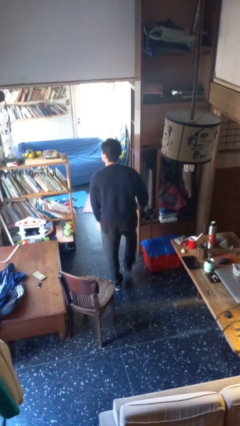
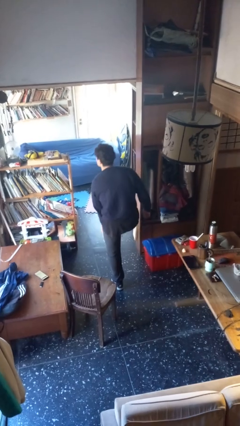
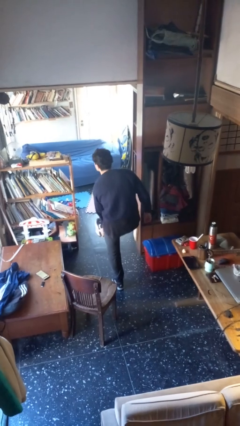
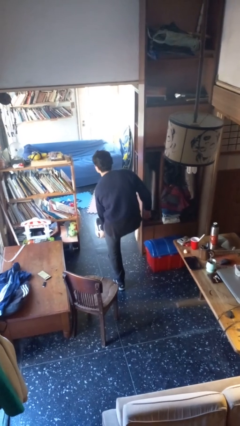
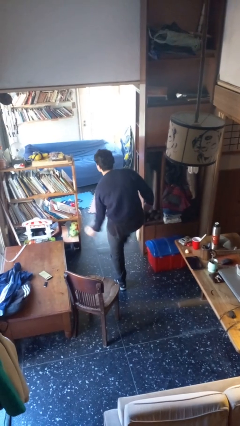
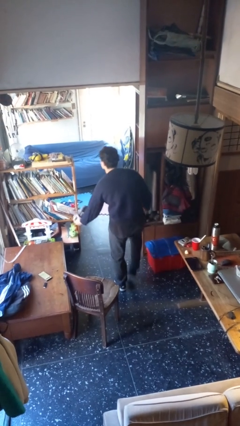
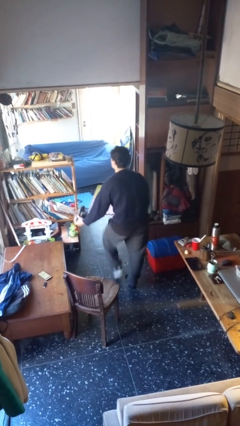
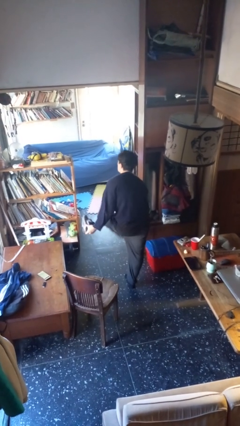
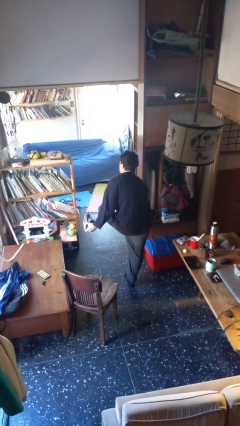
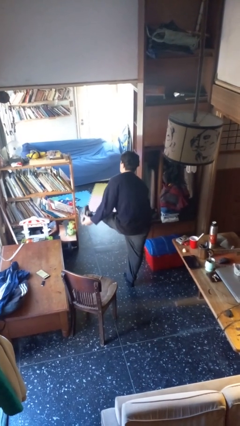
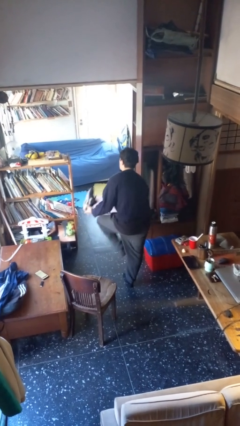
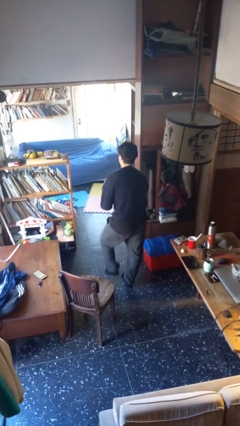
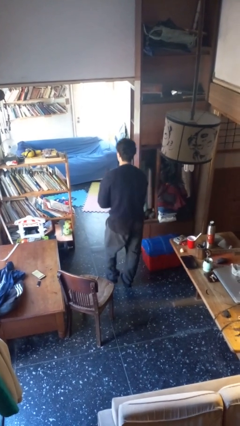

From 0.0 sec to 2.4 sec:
person takes off shoes

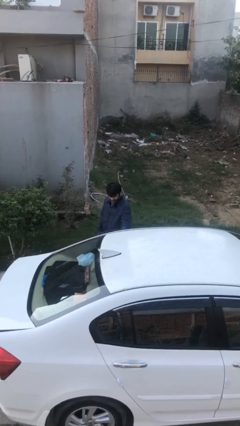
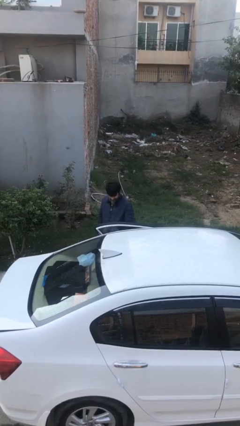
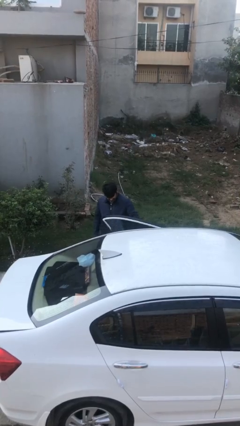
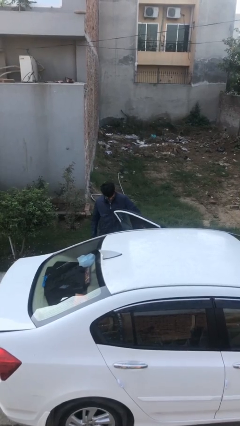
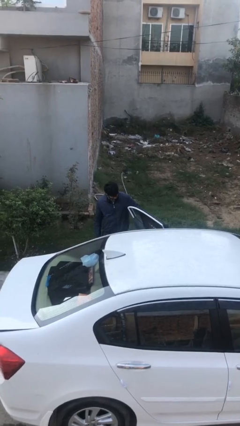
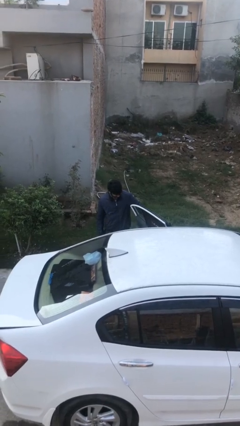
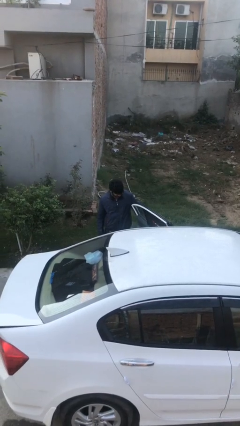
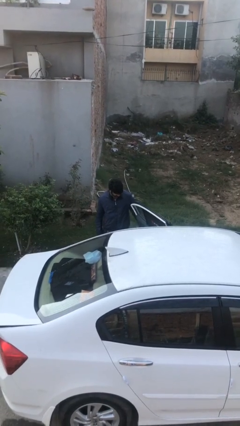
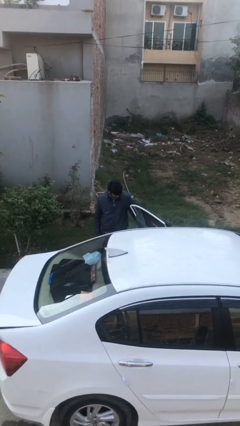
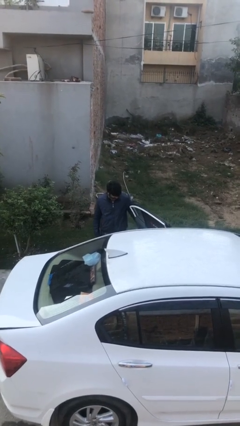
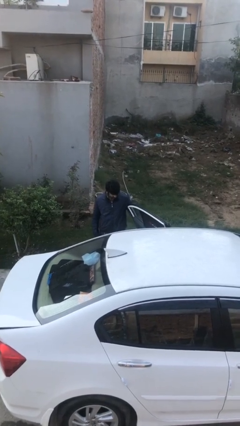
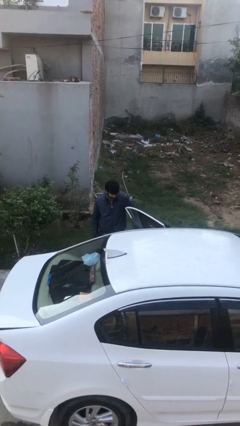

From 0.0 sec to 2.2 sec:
person opens car door

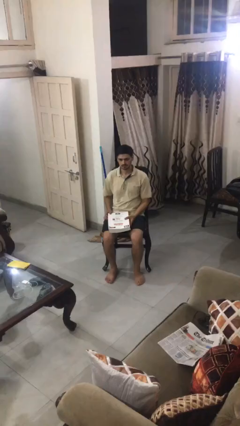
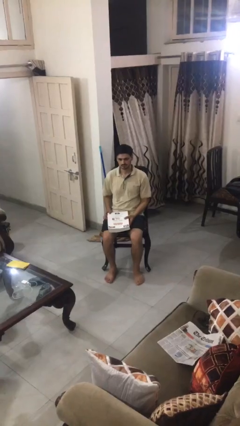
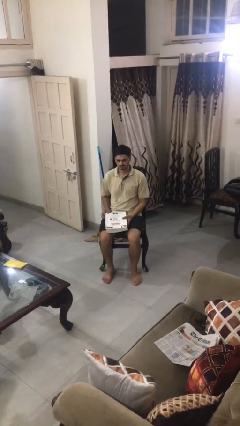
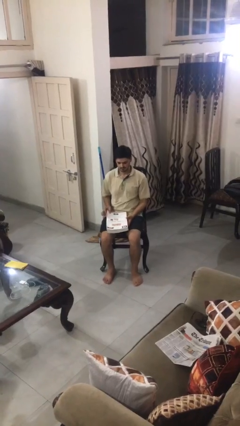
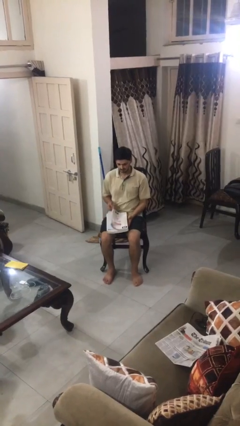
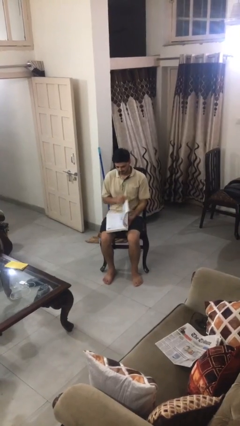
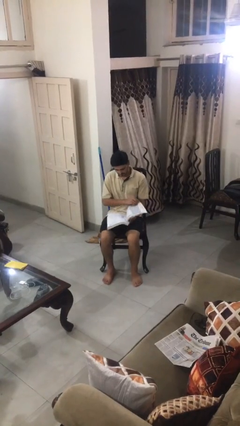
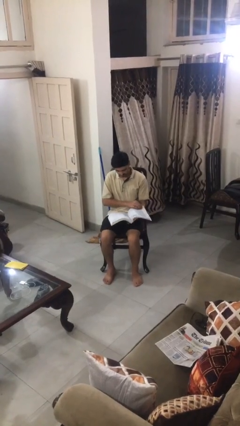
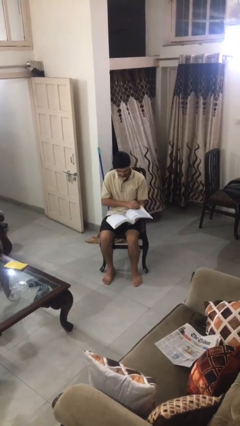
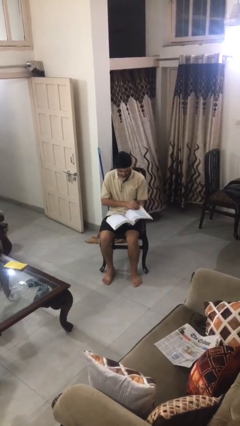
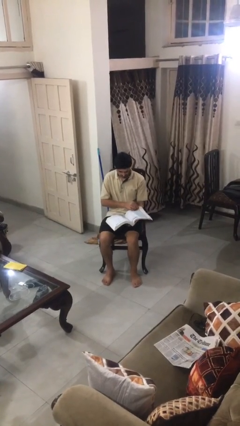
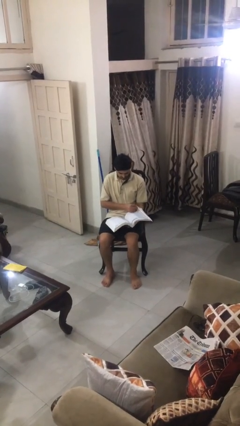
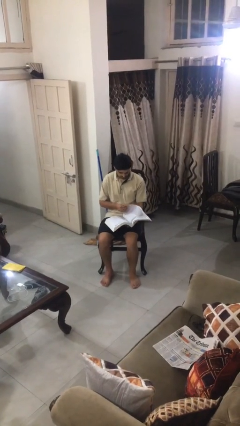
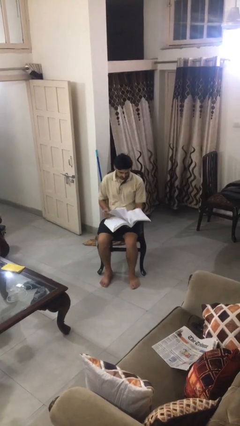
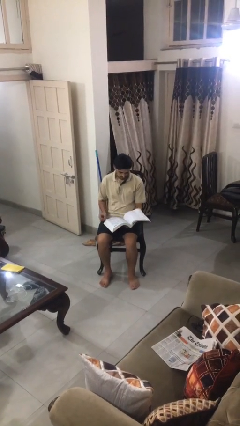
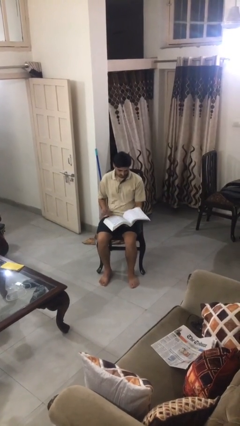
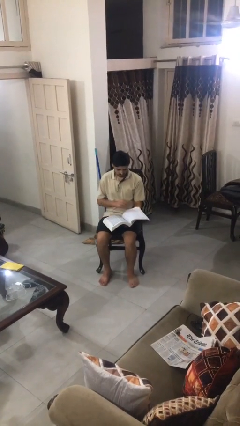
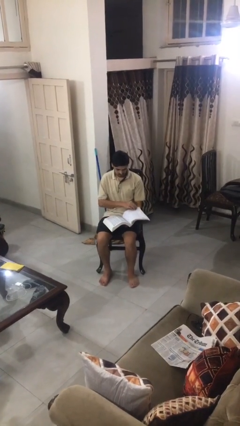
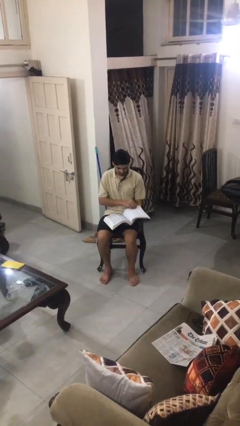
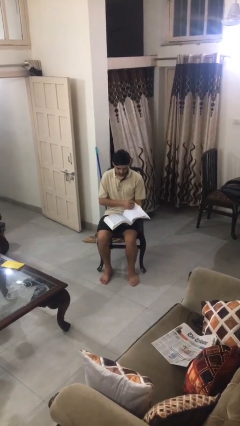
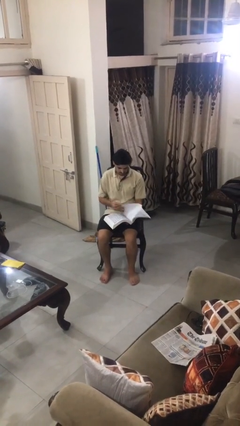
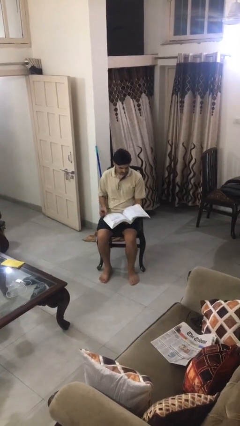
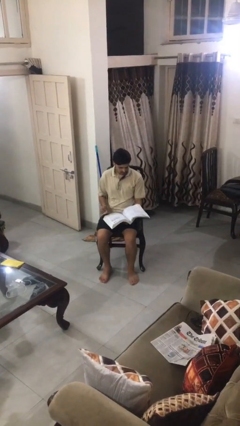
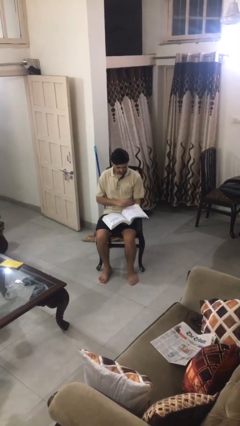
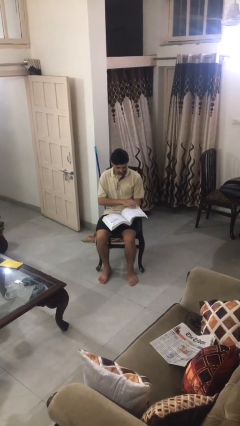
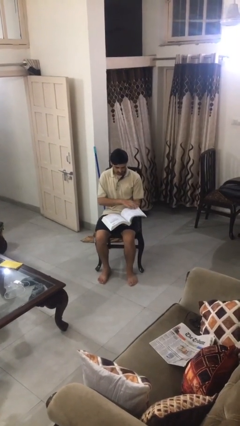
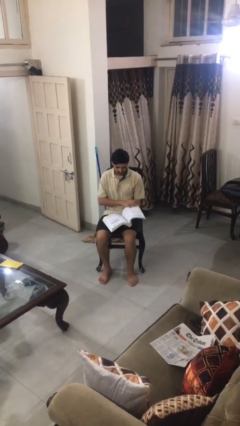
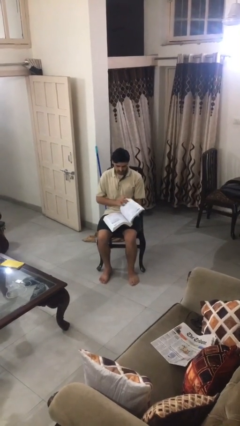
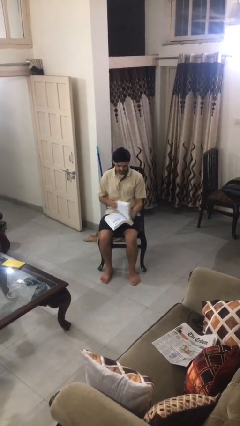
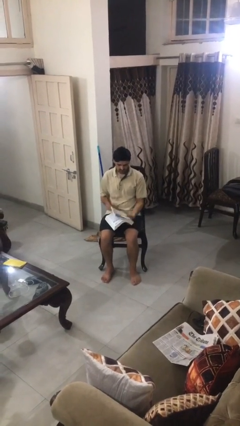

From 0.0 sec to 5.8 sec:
person reads book

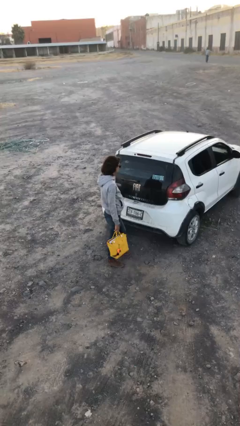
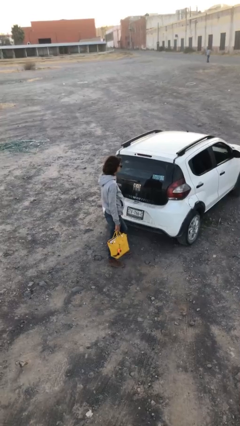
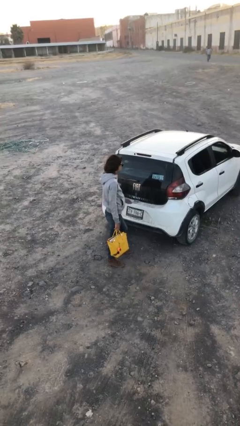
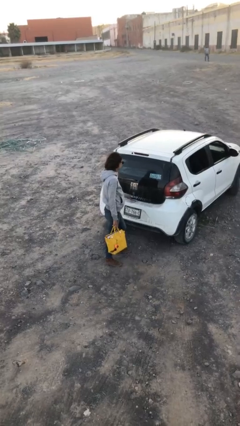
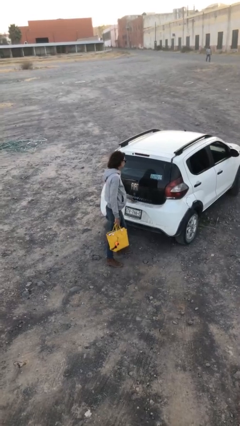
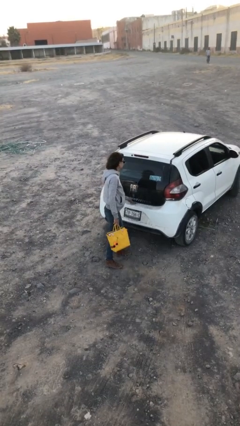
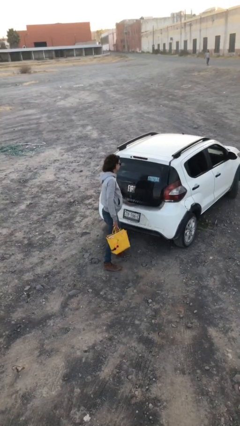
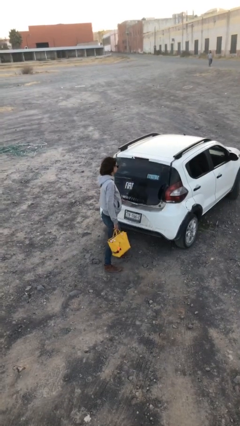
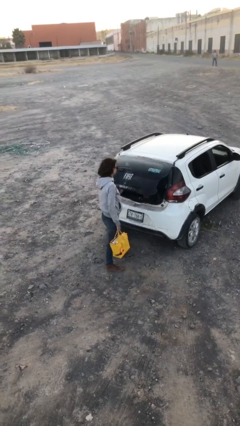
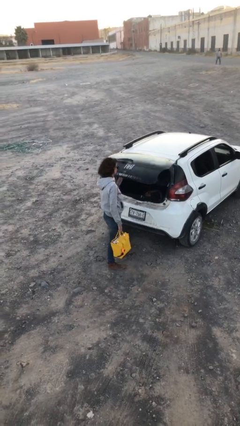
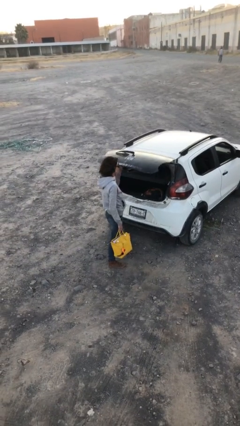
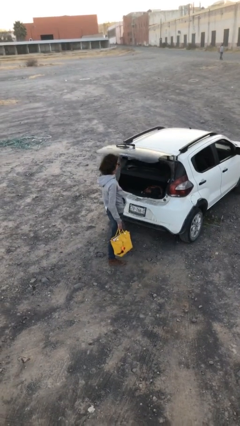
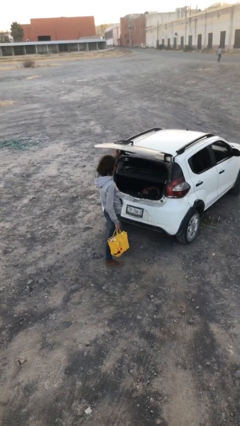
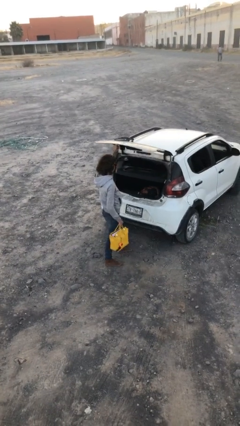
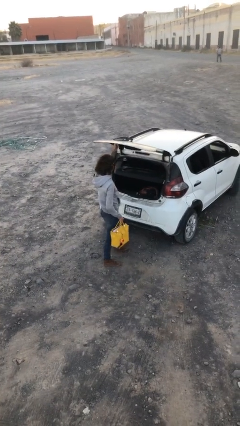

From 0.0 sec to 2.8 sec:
person opens car trunk

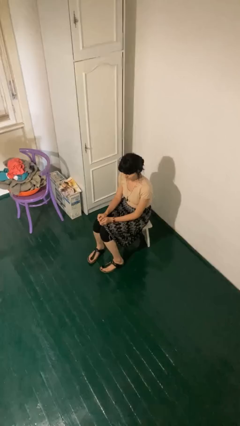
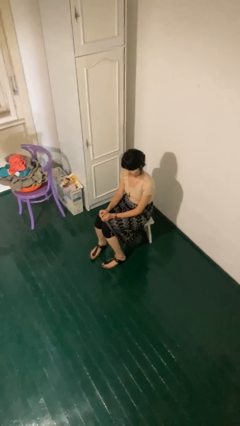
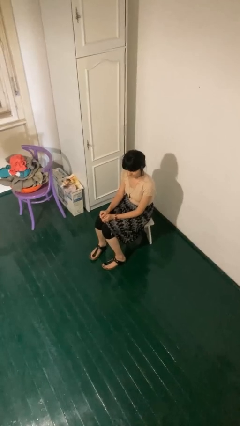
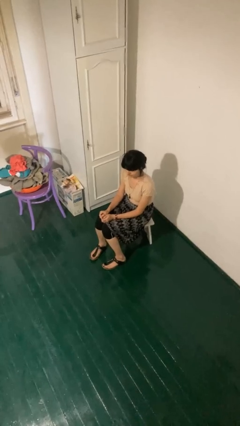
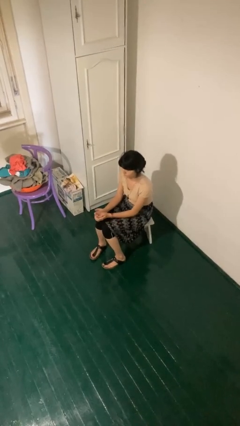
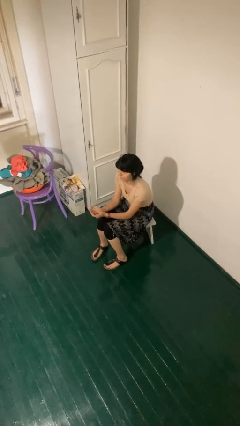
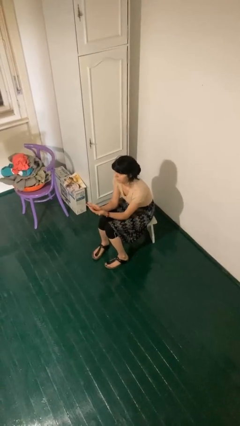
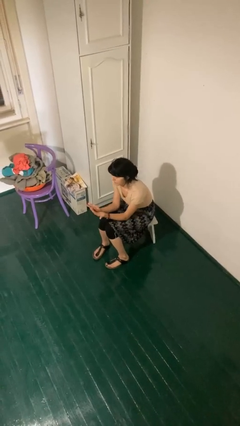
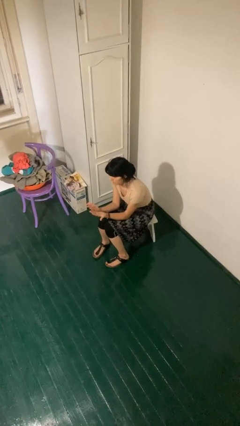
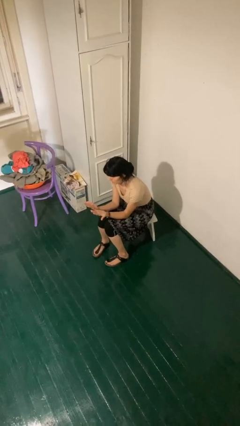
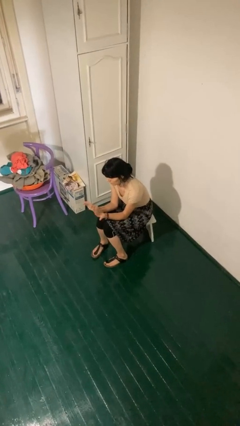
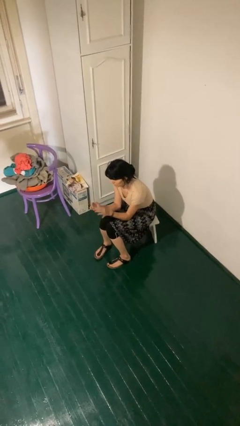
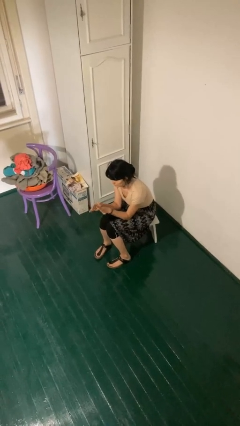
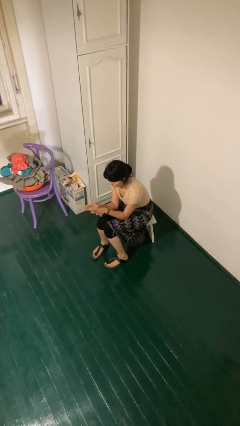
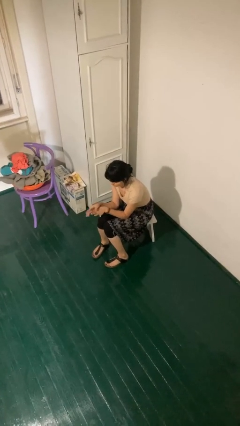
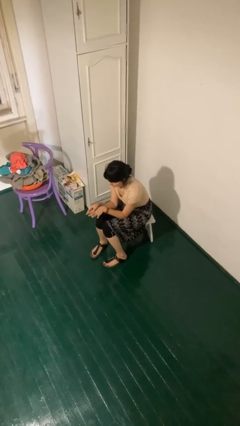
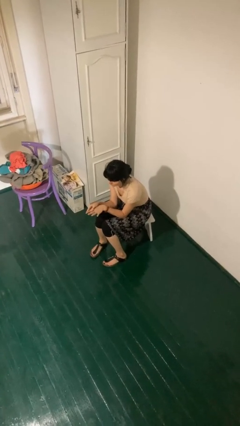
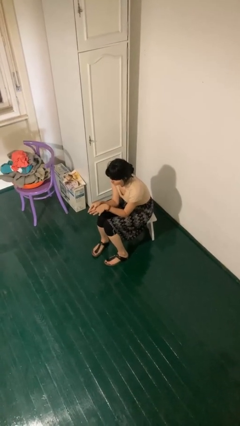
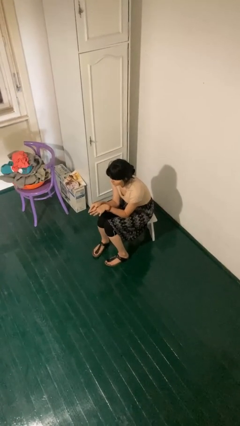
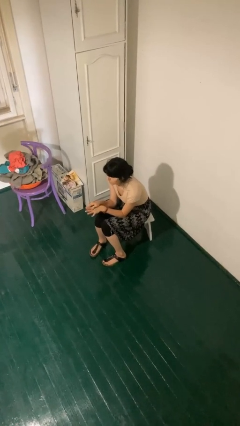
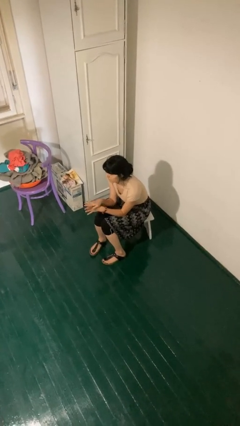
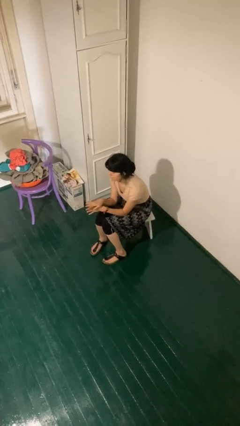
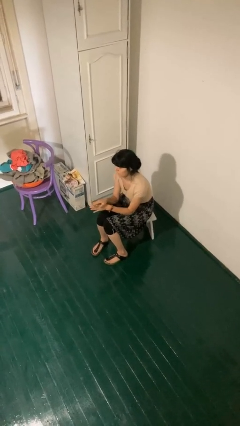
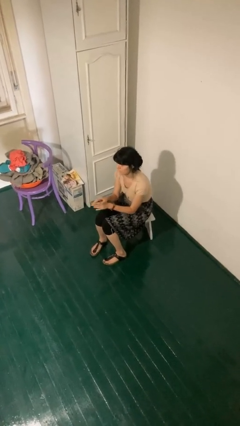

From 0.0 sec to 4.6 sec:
person looks at hands in lap
